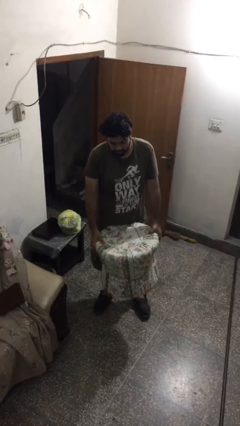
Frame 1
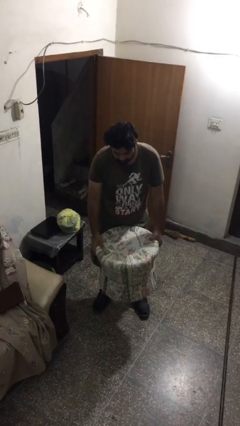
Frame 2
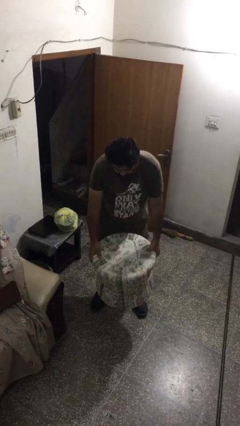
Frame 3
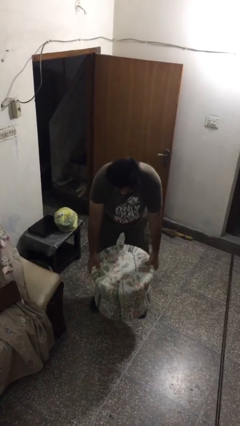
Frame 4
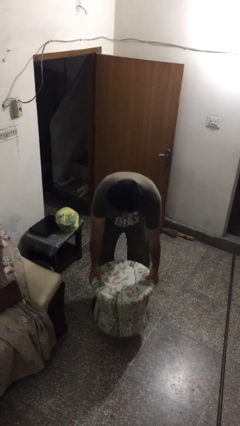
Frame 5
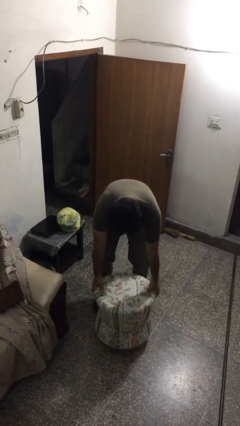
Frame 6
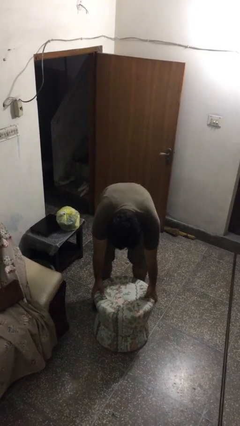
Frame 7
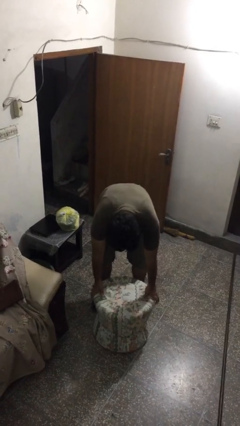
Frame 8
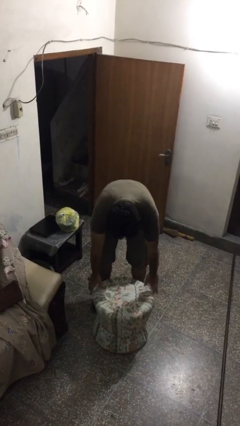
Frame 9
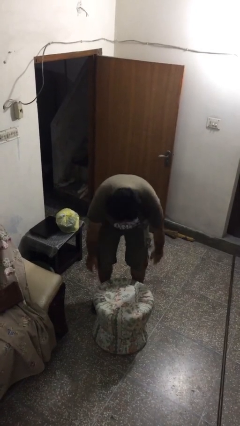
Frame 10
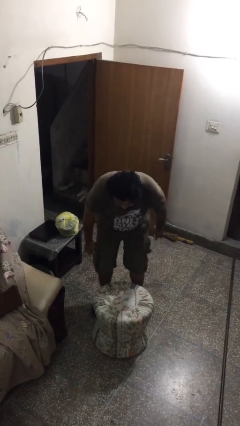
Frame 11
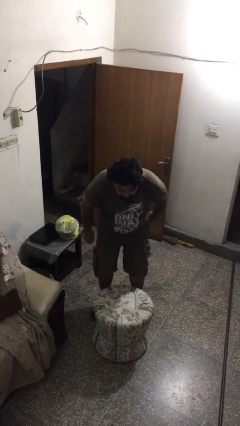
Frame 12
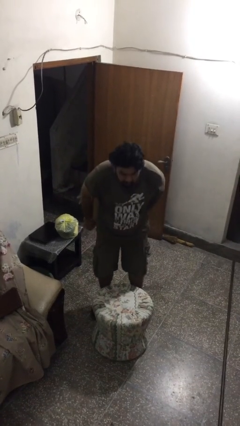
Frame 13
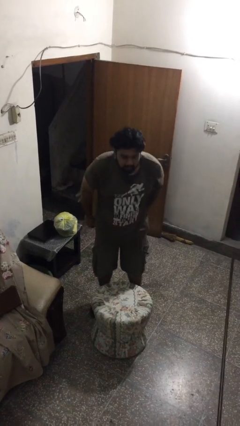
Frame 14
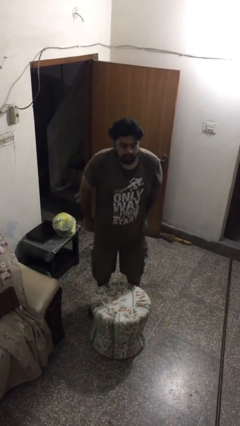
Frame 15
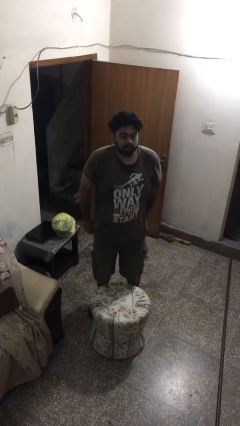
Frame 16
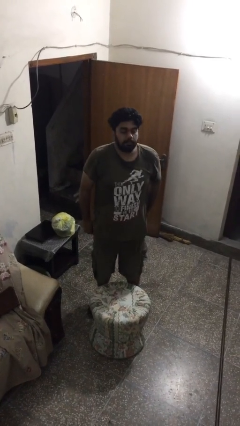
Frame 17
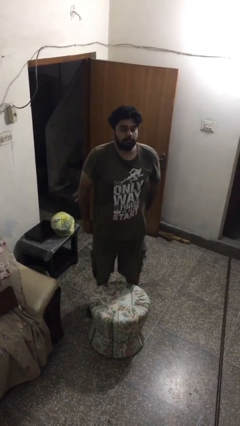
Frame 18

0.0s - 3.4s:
person puts down object on floor

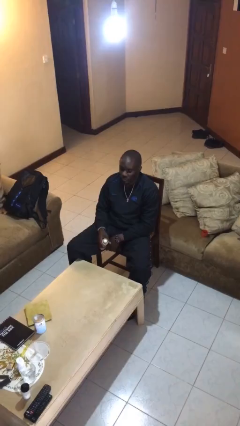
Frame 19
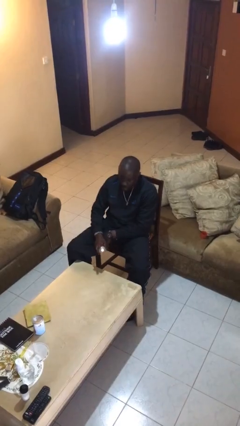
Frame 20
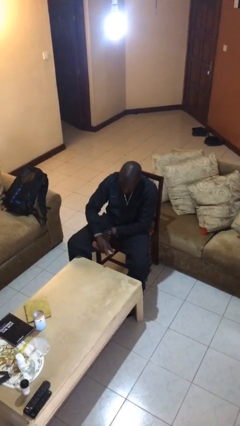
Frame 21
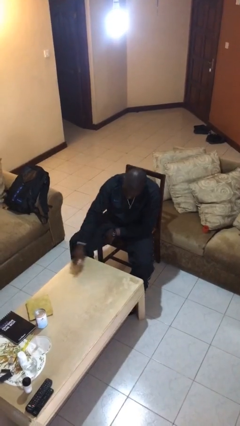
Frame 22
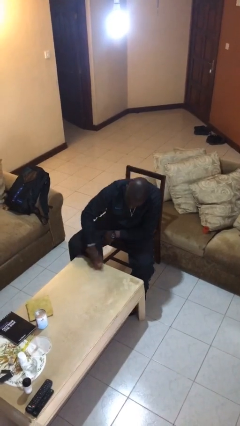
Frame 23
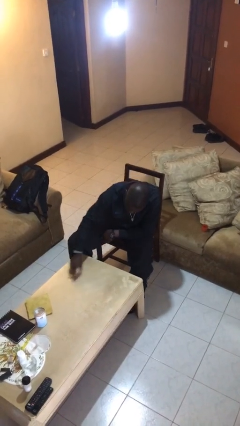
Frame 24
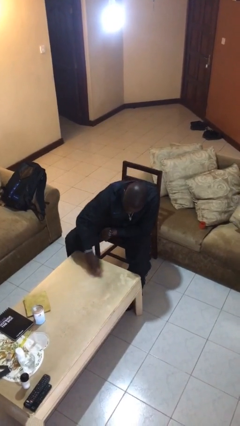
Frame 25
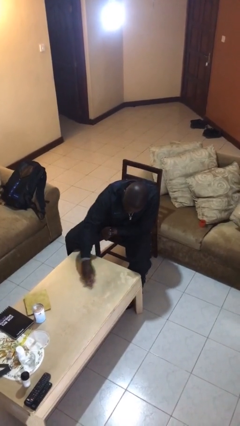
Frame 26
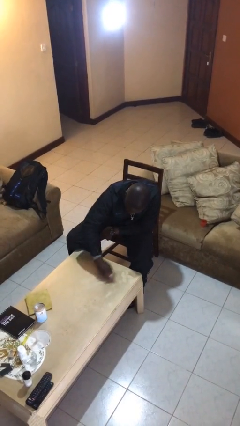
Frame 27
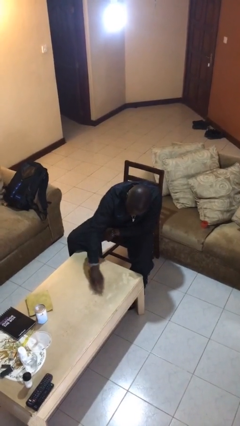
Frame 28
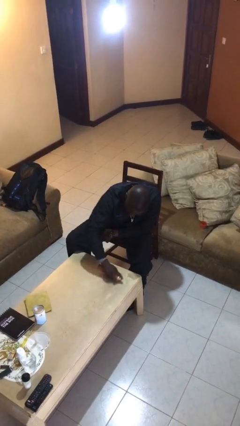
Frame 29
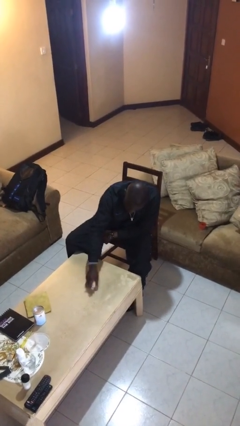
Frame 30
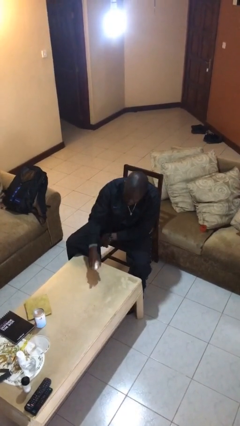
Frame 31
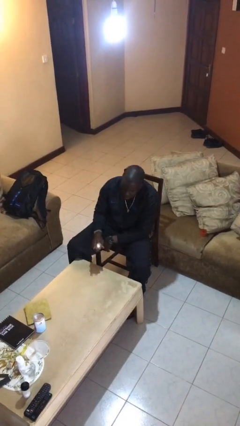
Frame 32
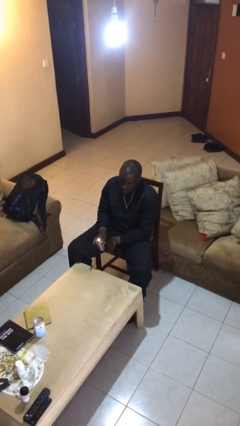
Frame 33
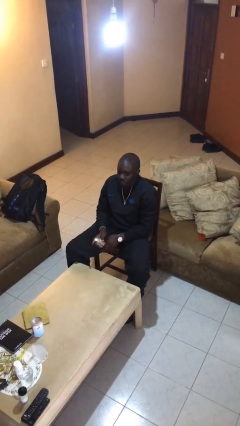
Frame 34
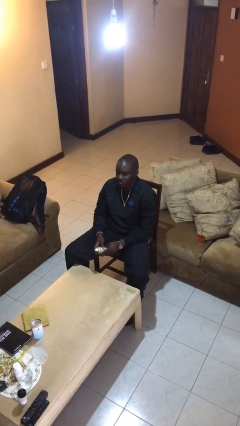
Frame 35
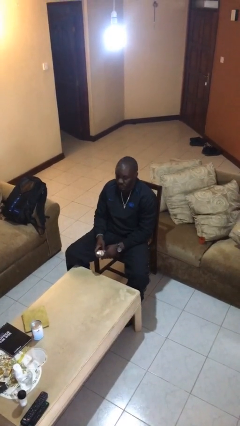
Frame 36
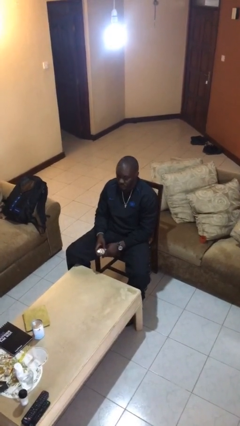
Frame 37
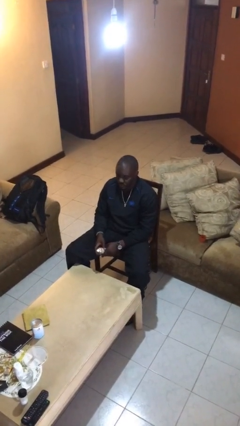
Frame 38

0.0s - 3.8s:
person sprays from bottle

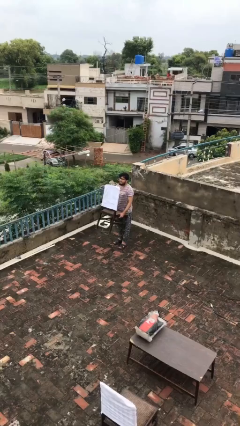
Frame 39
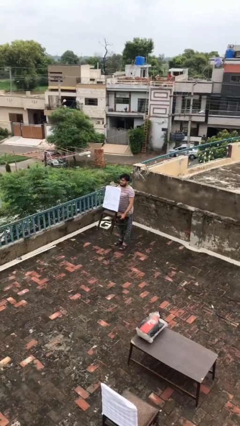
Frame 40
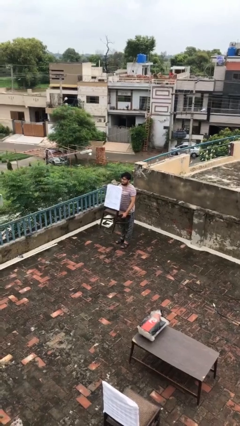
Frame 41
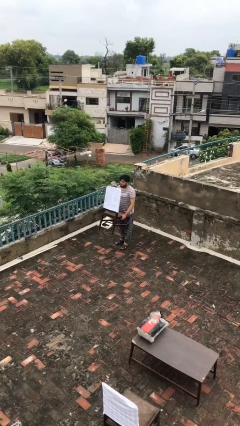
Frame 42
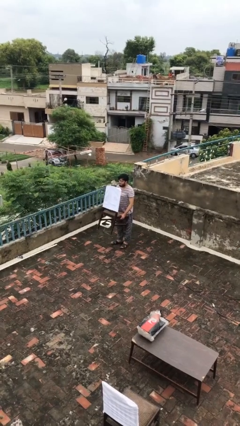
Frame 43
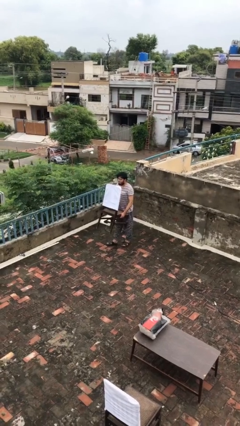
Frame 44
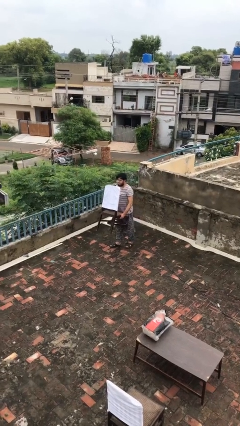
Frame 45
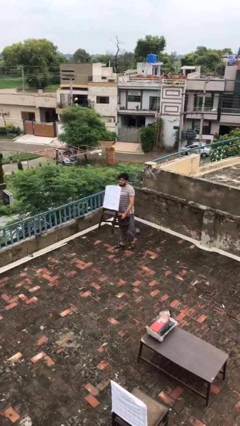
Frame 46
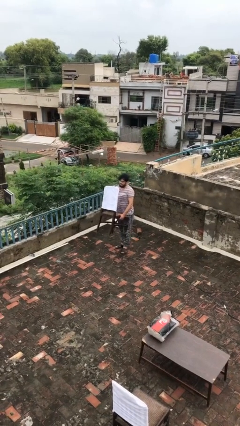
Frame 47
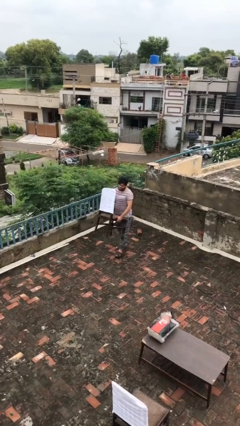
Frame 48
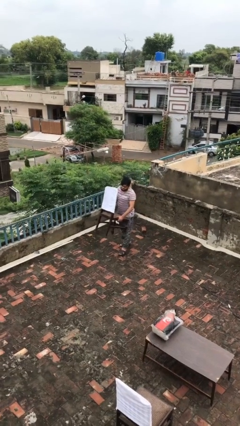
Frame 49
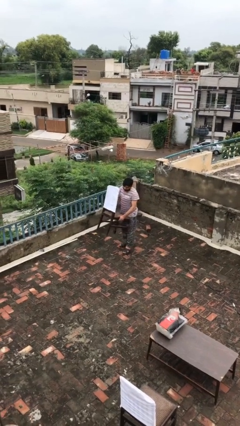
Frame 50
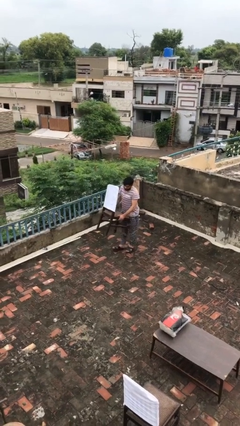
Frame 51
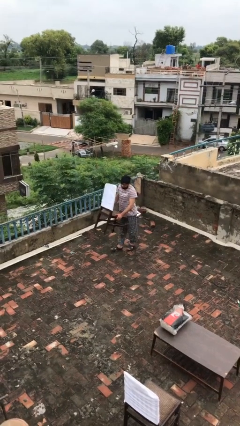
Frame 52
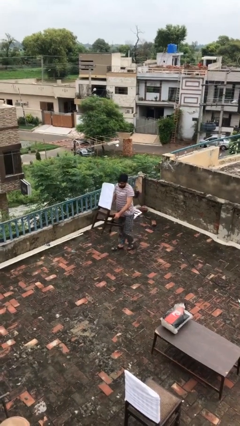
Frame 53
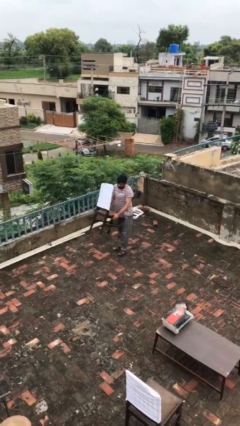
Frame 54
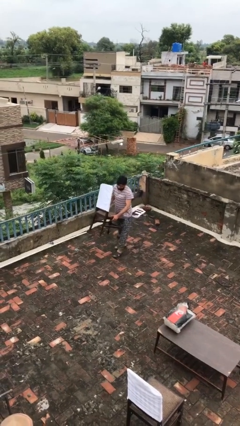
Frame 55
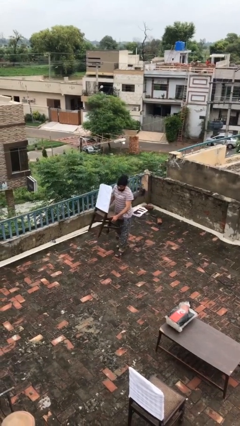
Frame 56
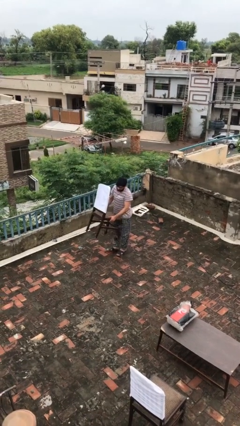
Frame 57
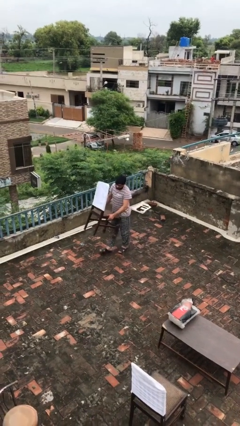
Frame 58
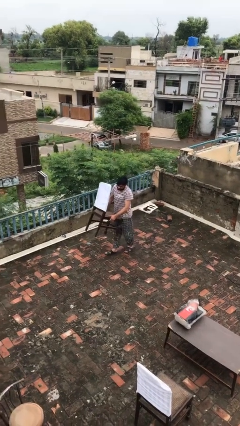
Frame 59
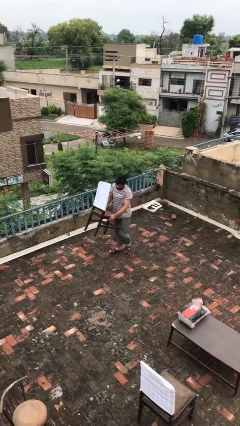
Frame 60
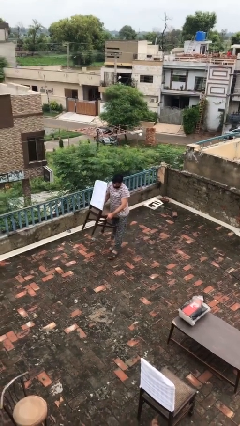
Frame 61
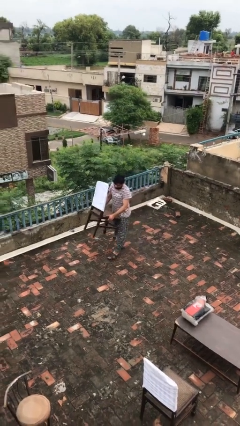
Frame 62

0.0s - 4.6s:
person carries heavy object

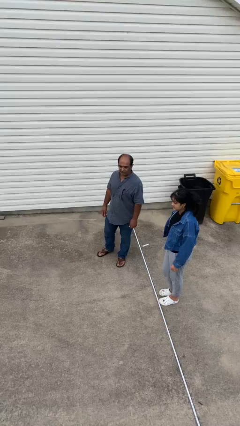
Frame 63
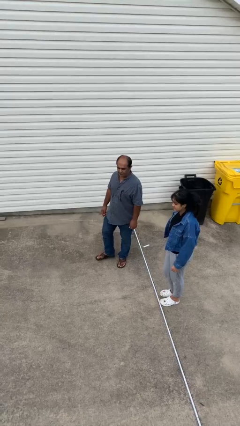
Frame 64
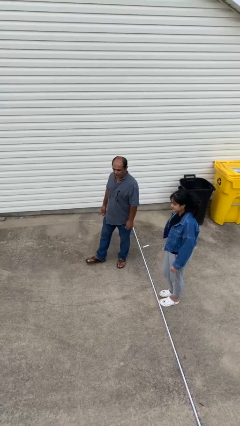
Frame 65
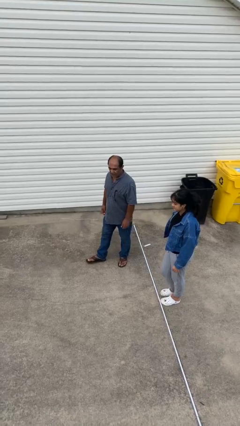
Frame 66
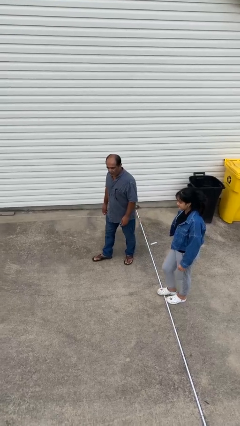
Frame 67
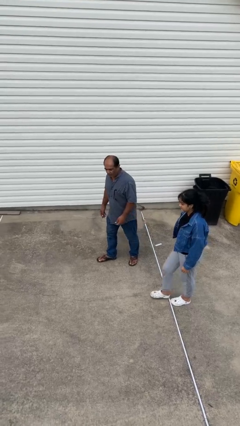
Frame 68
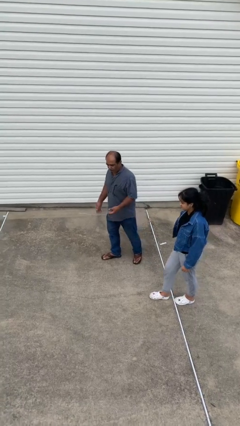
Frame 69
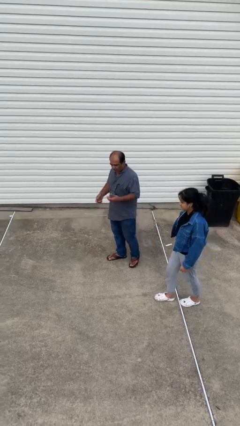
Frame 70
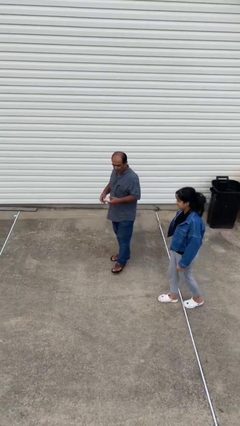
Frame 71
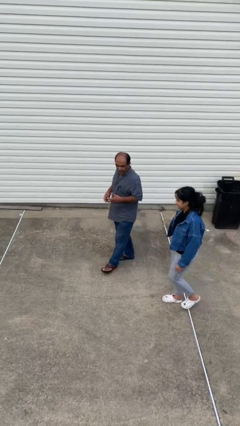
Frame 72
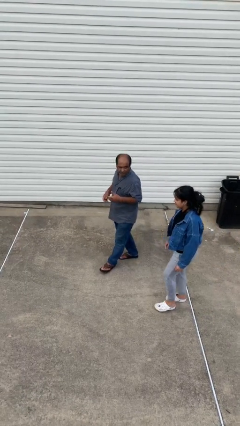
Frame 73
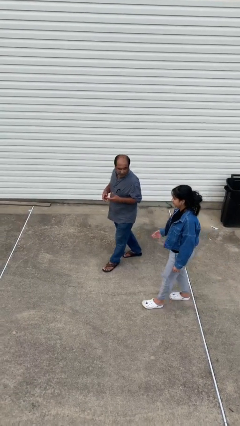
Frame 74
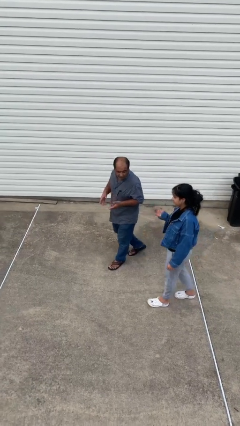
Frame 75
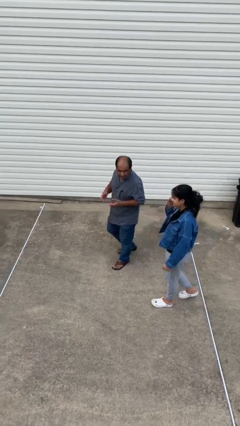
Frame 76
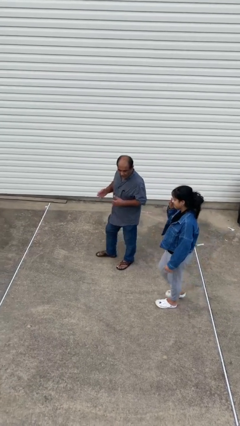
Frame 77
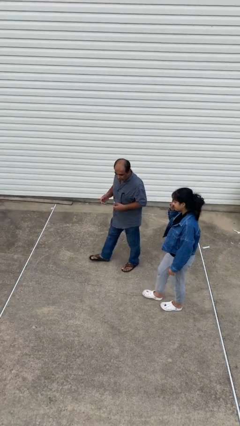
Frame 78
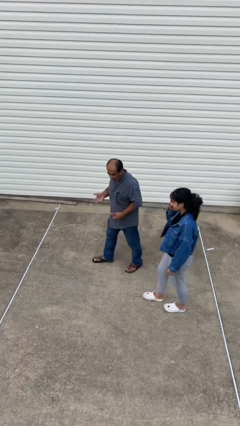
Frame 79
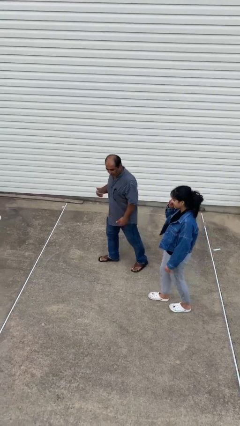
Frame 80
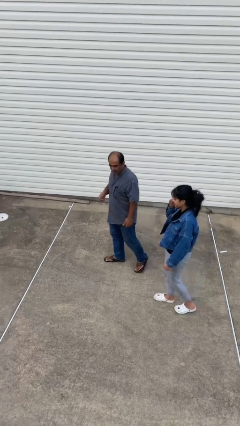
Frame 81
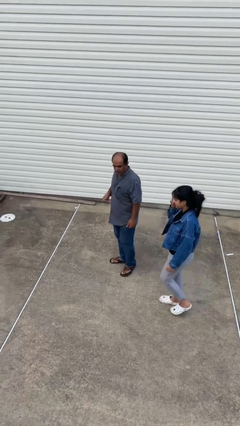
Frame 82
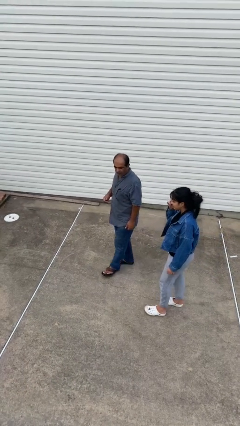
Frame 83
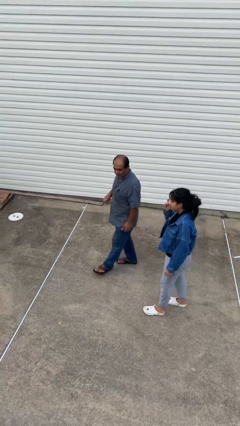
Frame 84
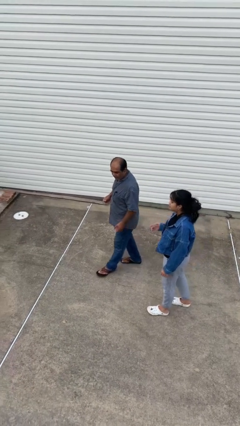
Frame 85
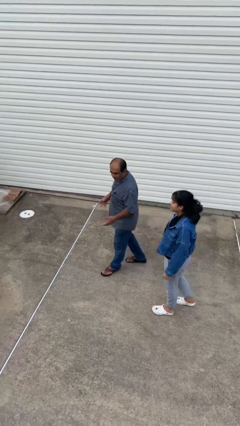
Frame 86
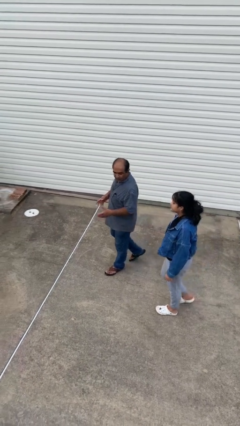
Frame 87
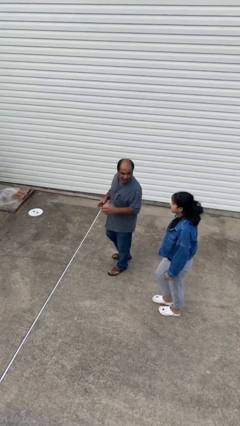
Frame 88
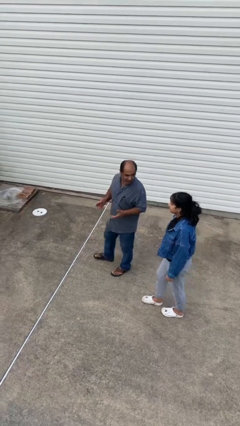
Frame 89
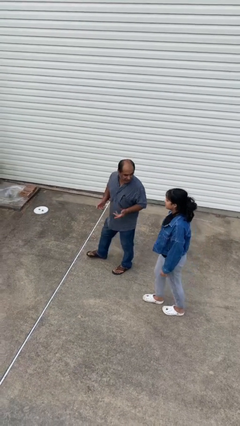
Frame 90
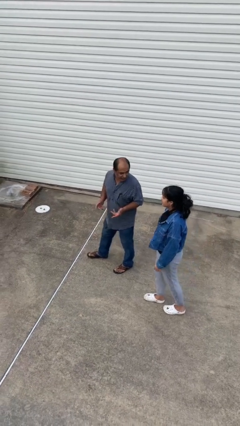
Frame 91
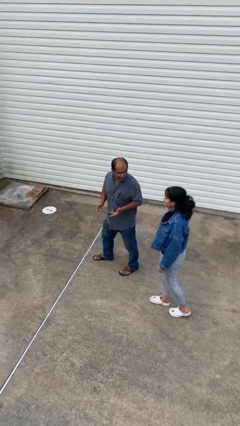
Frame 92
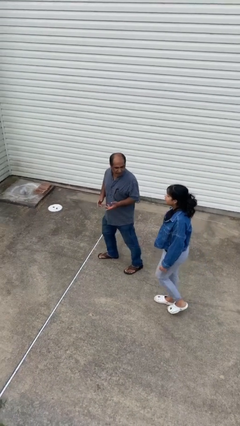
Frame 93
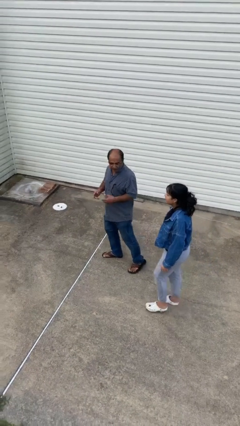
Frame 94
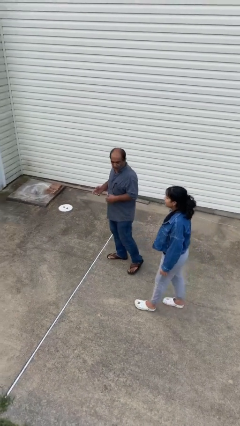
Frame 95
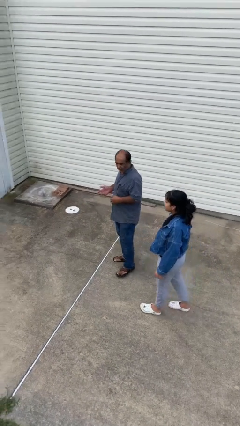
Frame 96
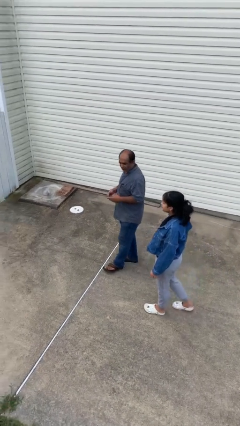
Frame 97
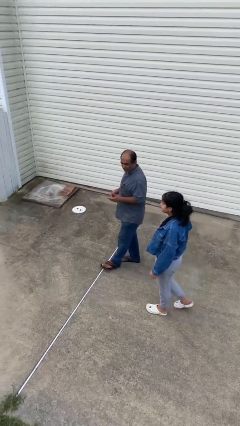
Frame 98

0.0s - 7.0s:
person talks to person
